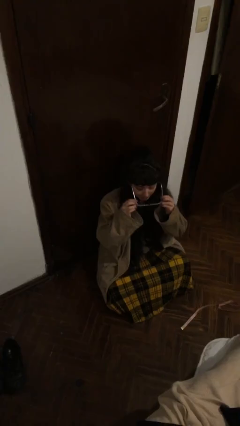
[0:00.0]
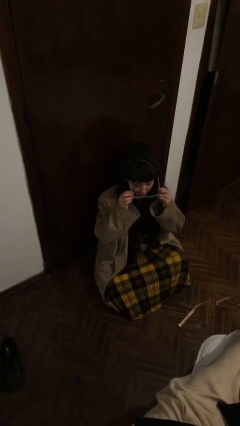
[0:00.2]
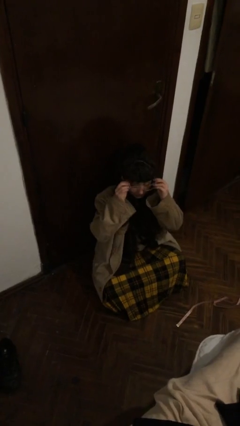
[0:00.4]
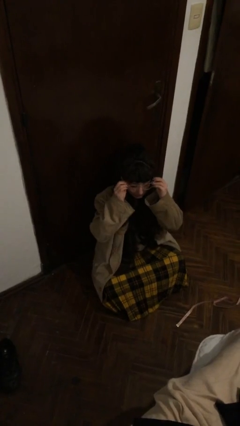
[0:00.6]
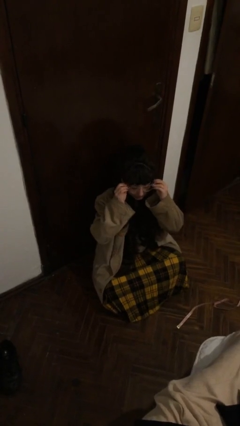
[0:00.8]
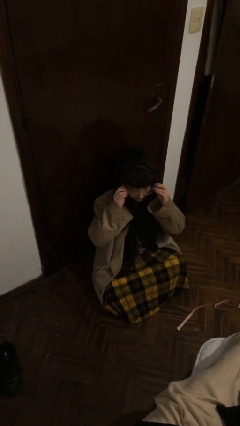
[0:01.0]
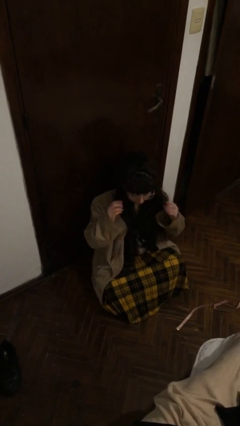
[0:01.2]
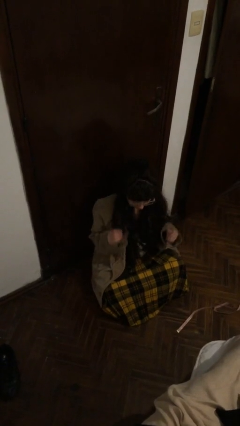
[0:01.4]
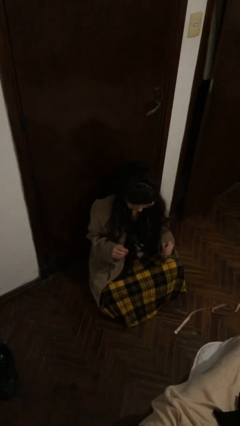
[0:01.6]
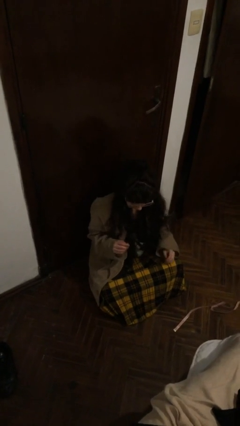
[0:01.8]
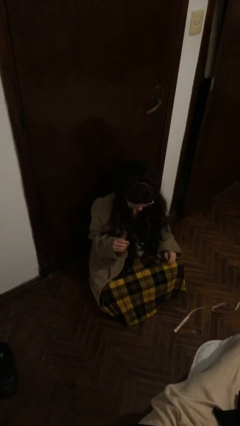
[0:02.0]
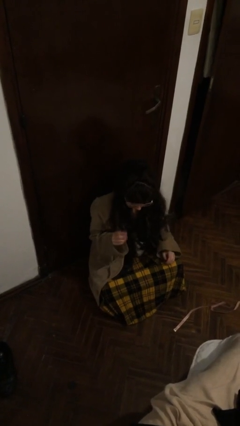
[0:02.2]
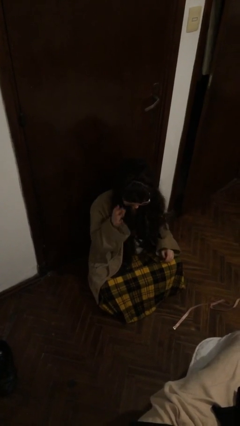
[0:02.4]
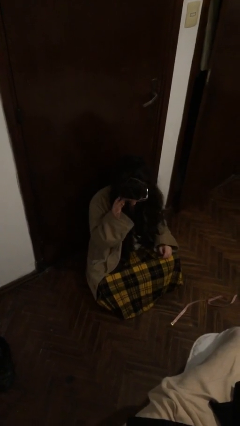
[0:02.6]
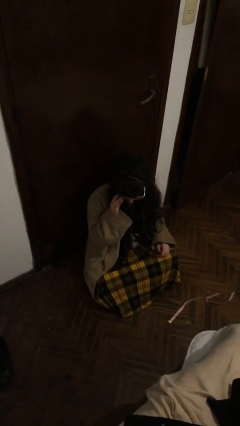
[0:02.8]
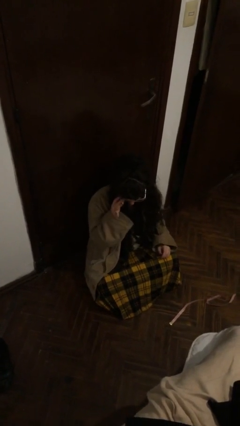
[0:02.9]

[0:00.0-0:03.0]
person puts on glasses

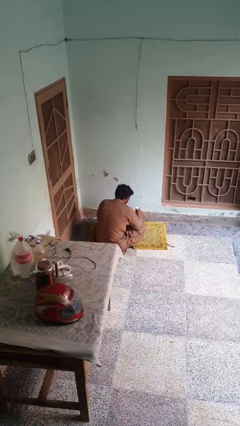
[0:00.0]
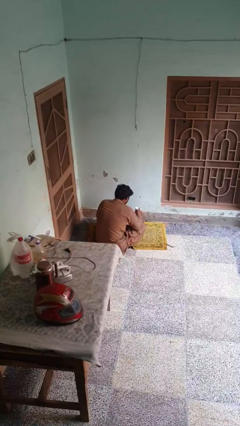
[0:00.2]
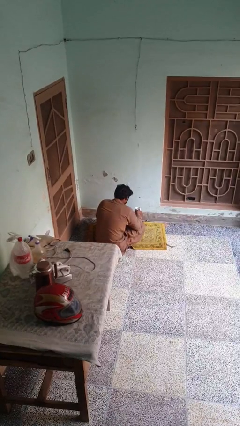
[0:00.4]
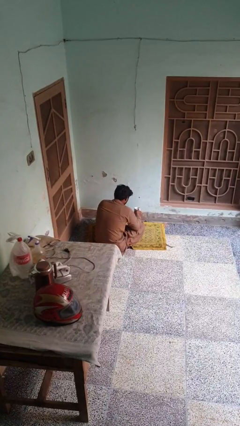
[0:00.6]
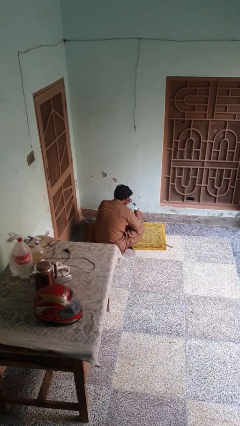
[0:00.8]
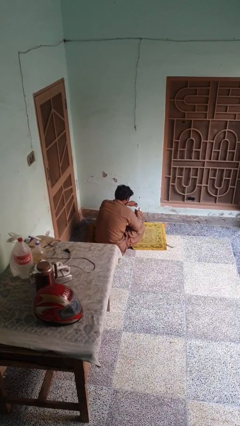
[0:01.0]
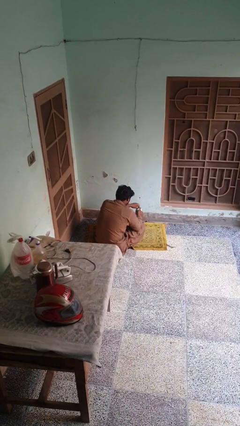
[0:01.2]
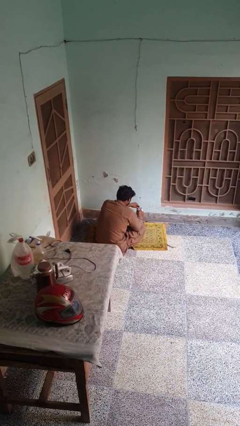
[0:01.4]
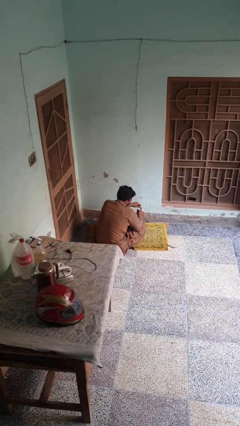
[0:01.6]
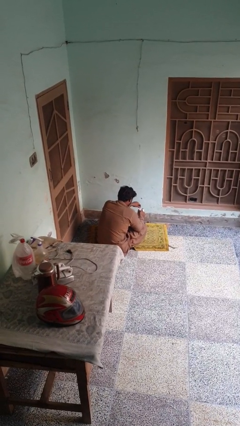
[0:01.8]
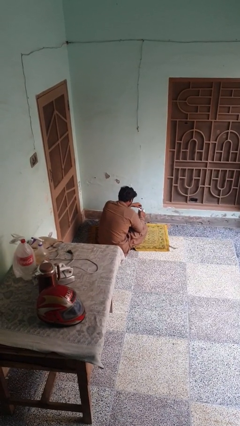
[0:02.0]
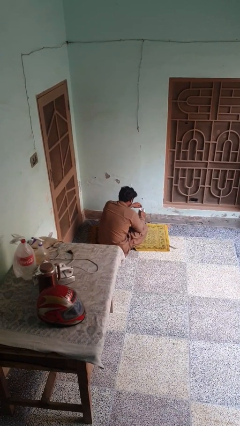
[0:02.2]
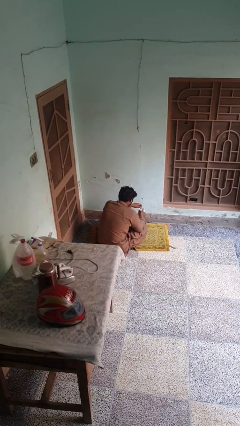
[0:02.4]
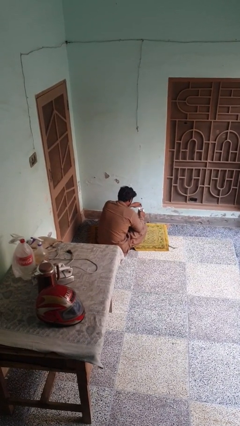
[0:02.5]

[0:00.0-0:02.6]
person stirs mug

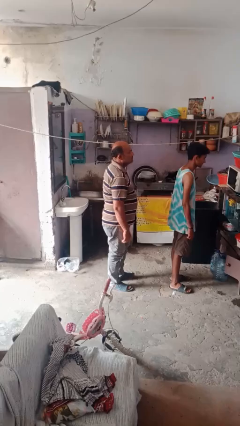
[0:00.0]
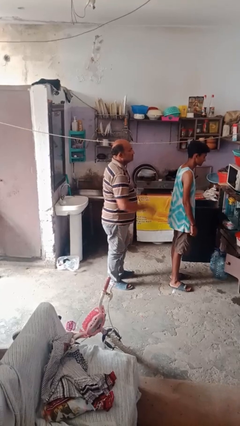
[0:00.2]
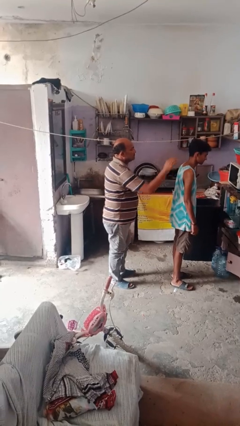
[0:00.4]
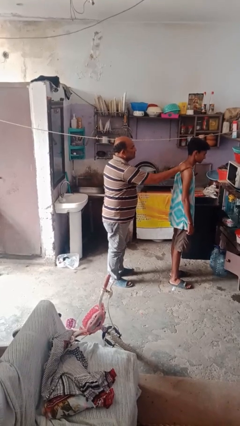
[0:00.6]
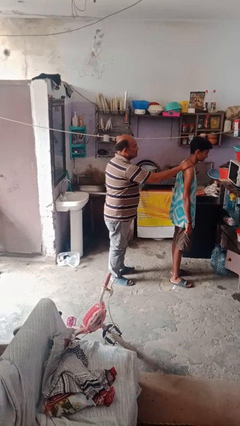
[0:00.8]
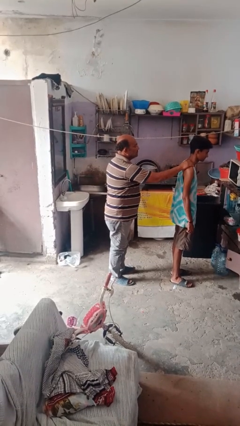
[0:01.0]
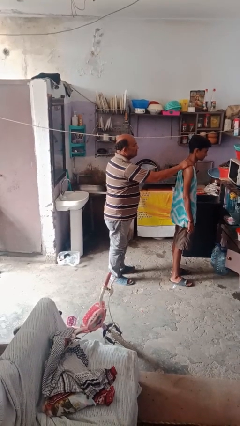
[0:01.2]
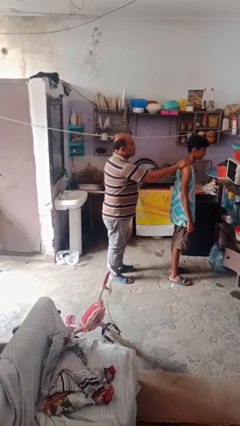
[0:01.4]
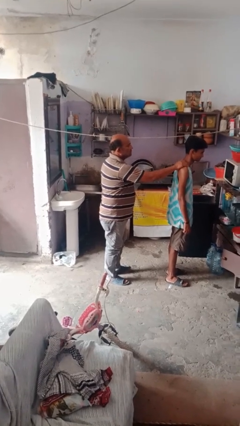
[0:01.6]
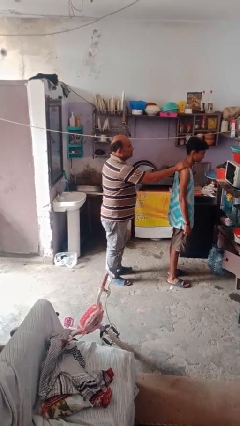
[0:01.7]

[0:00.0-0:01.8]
person grabs person by shoulder

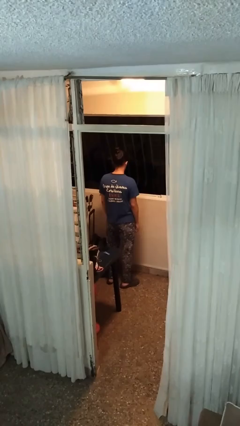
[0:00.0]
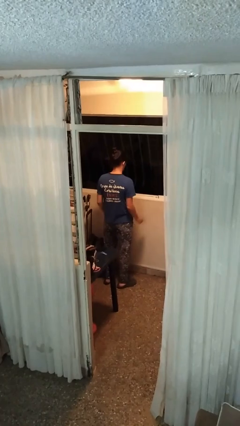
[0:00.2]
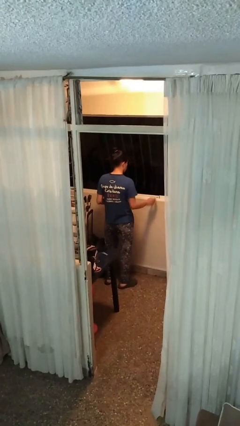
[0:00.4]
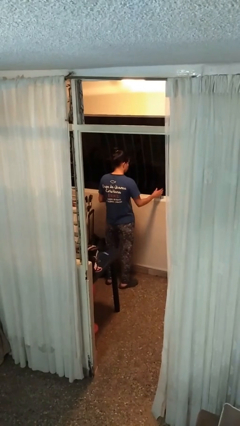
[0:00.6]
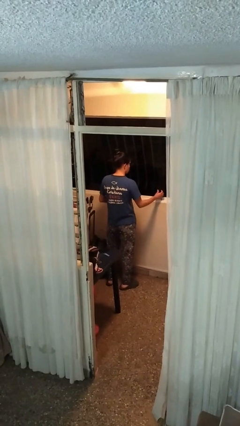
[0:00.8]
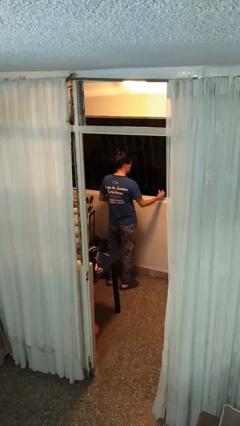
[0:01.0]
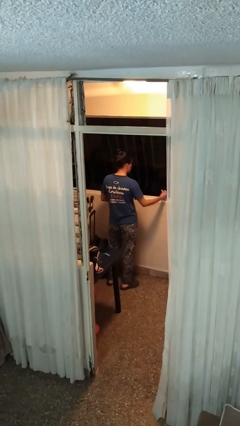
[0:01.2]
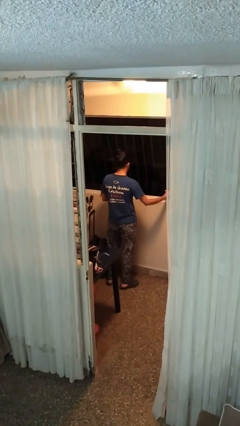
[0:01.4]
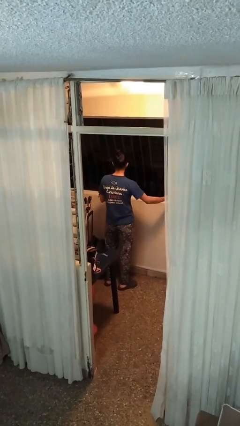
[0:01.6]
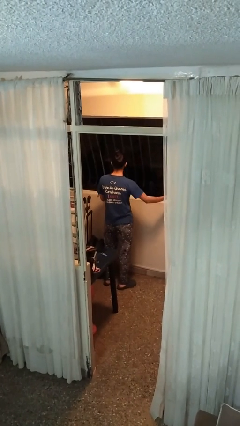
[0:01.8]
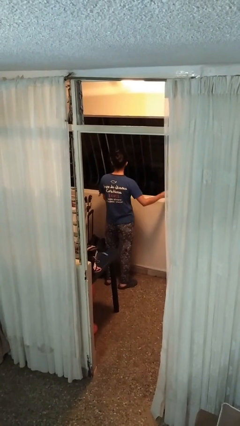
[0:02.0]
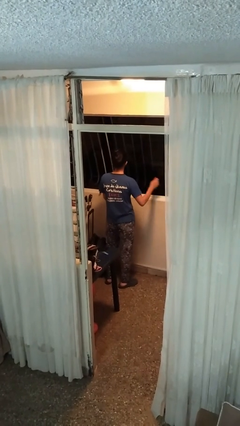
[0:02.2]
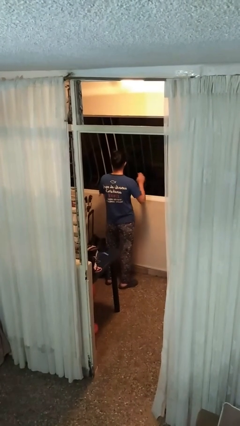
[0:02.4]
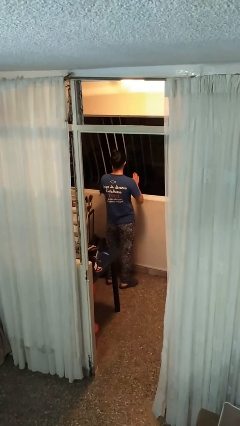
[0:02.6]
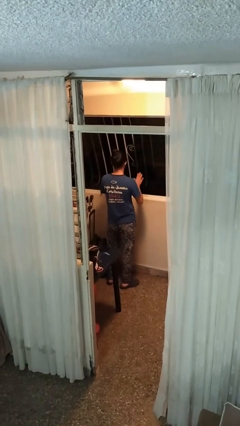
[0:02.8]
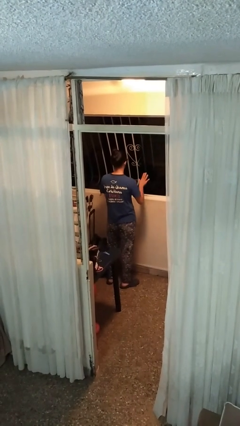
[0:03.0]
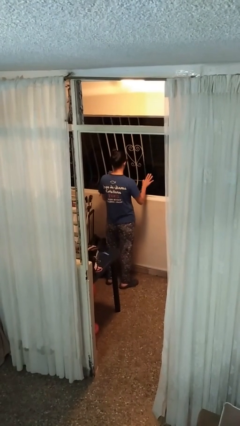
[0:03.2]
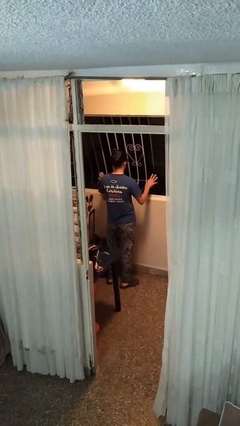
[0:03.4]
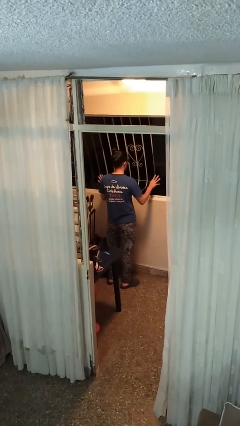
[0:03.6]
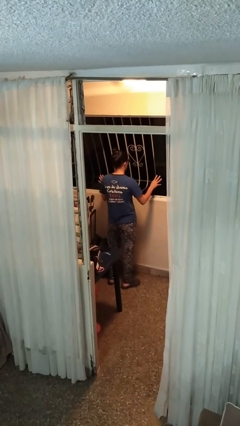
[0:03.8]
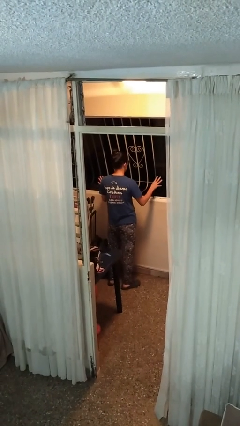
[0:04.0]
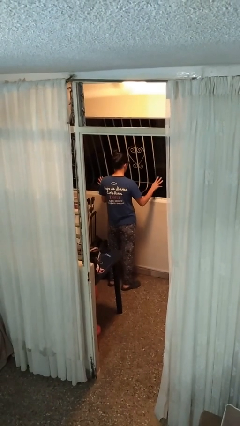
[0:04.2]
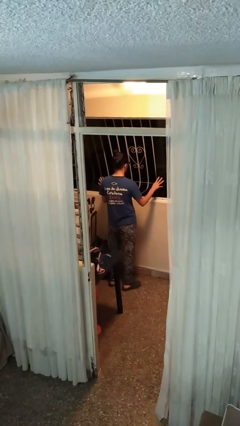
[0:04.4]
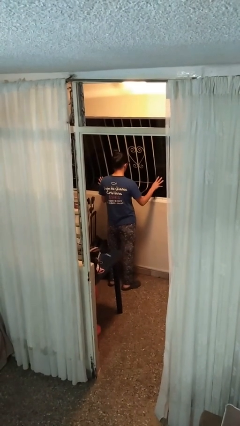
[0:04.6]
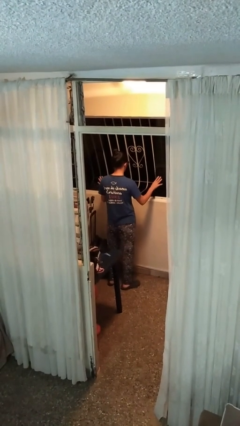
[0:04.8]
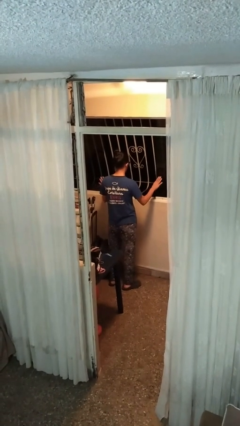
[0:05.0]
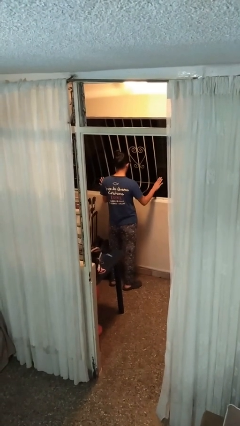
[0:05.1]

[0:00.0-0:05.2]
person opens home window

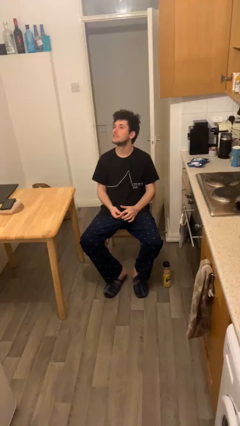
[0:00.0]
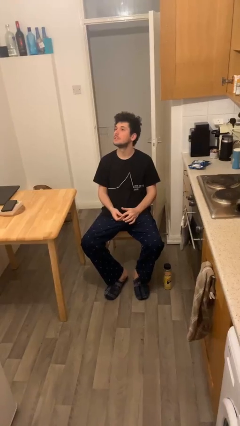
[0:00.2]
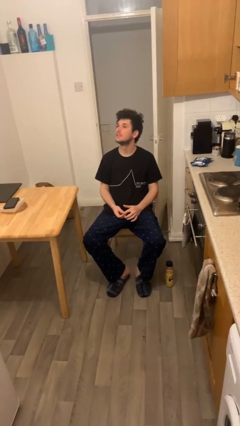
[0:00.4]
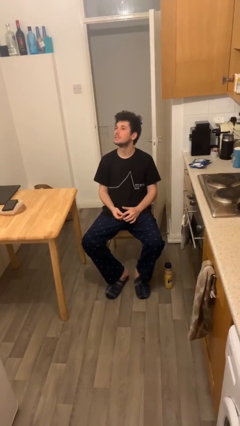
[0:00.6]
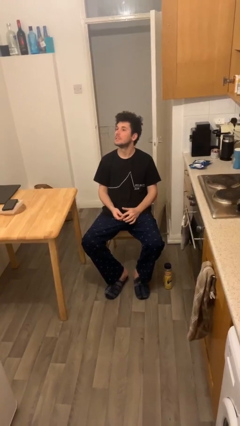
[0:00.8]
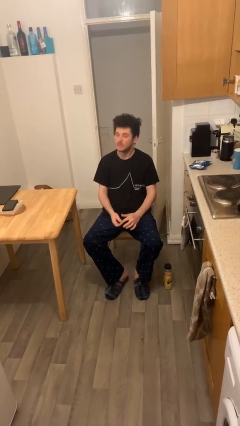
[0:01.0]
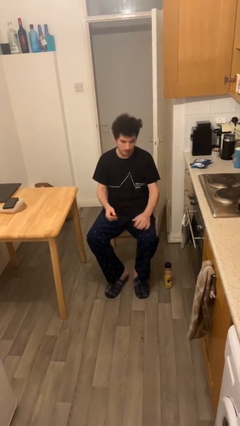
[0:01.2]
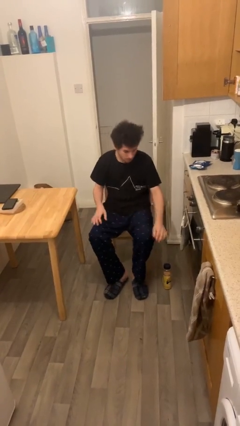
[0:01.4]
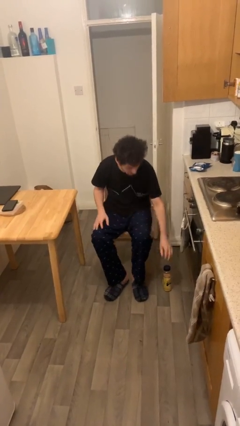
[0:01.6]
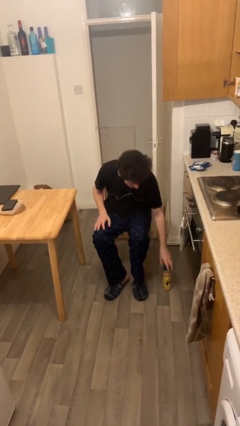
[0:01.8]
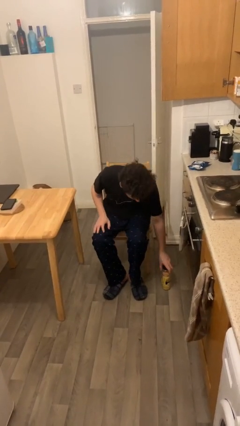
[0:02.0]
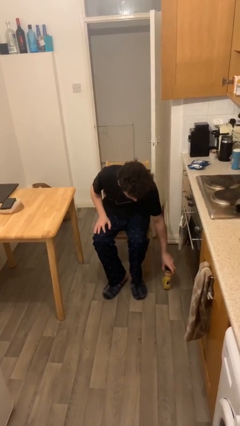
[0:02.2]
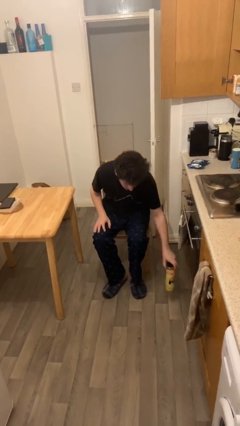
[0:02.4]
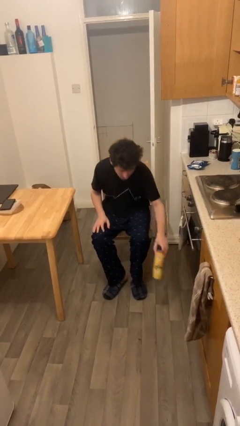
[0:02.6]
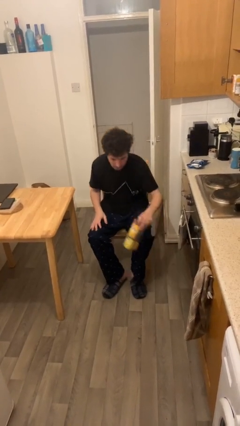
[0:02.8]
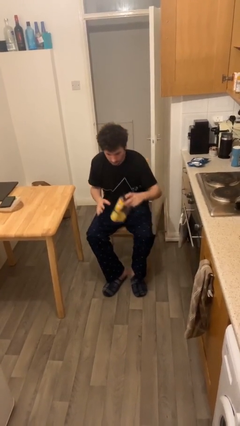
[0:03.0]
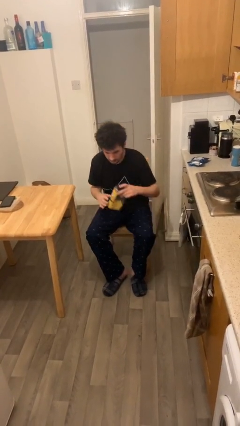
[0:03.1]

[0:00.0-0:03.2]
person picks up object from floor

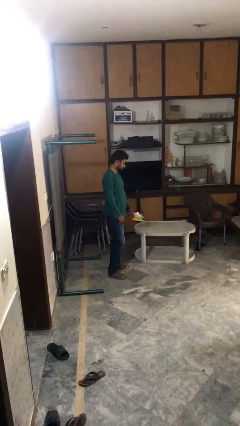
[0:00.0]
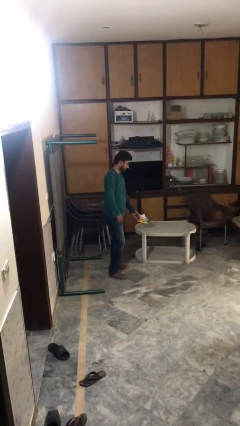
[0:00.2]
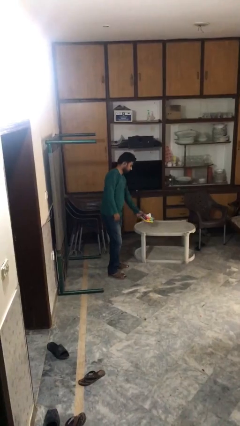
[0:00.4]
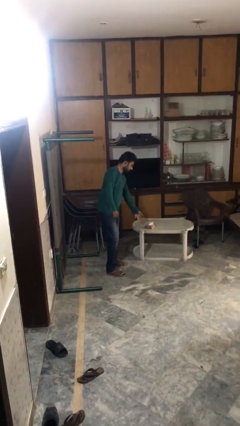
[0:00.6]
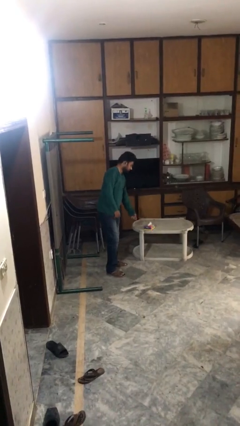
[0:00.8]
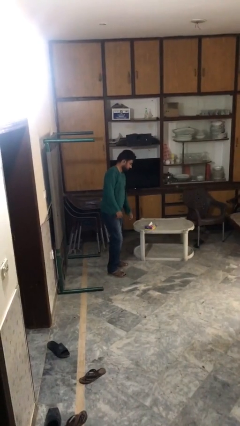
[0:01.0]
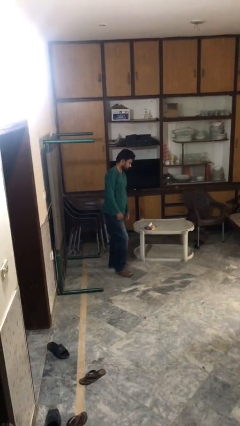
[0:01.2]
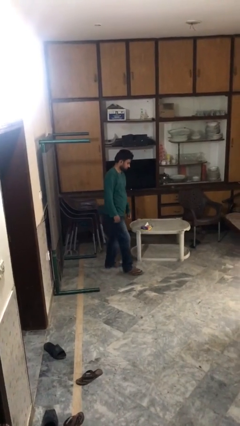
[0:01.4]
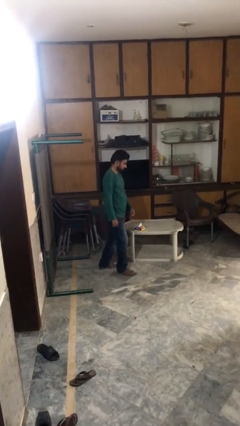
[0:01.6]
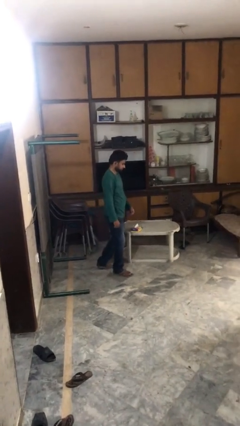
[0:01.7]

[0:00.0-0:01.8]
person puts down object on table
